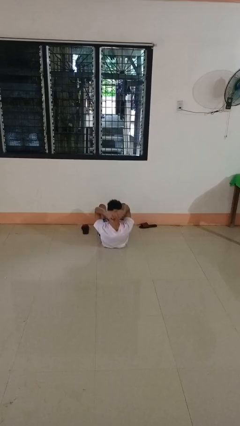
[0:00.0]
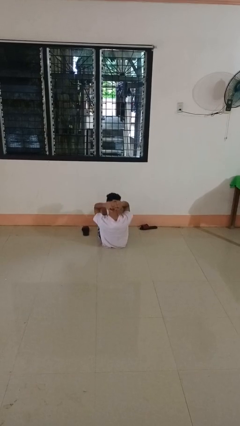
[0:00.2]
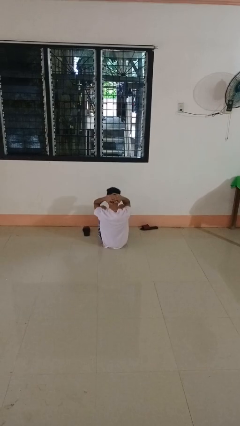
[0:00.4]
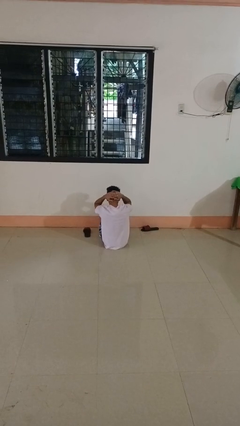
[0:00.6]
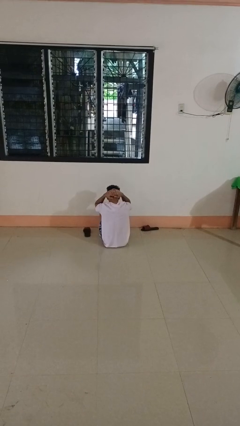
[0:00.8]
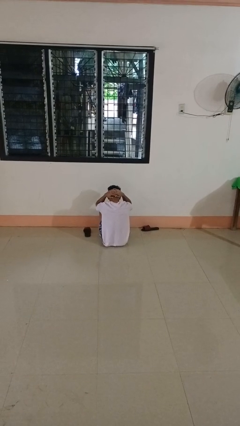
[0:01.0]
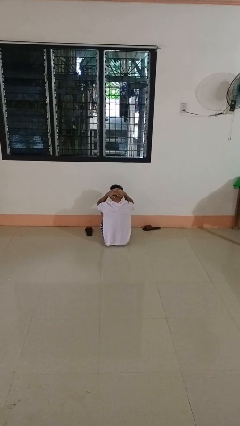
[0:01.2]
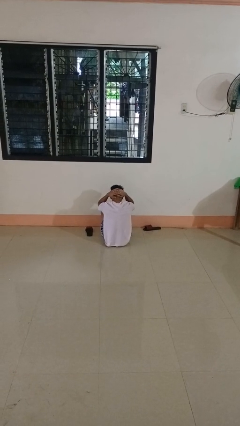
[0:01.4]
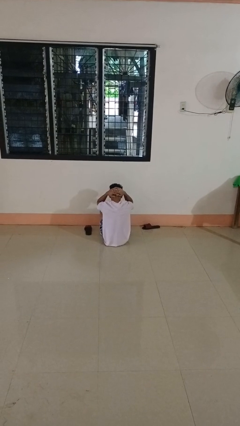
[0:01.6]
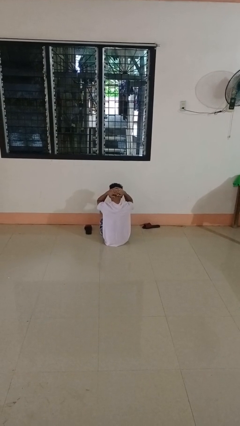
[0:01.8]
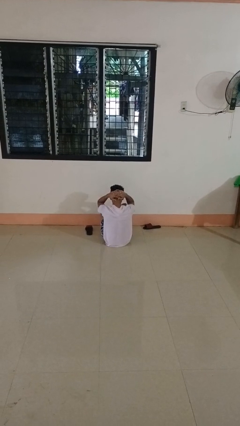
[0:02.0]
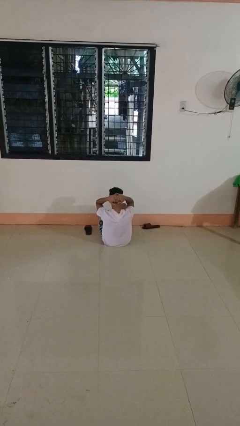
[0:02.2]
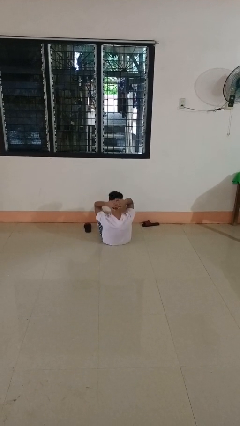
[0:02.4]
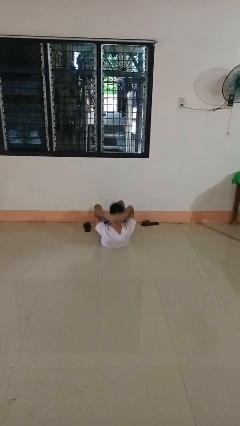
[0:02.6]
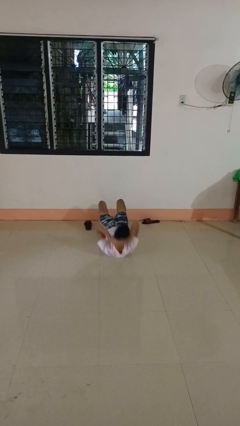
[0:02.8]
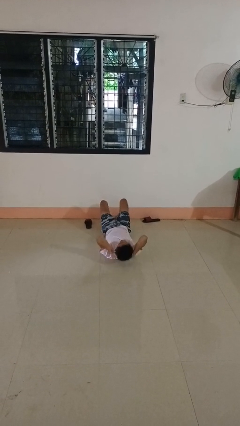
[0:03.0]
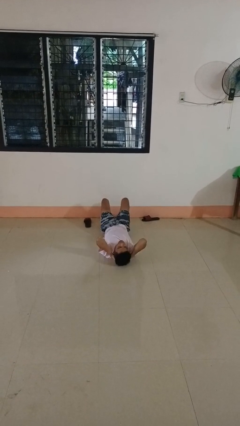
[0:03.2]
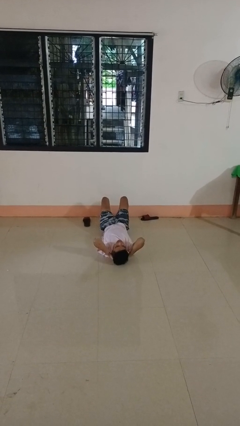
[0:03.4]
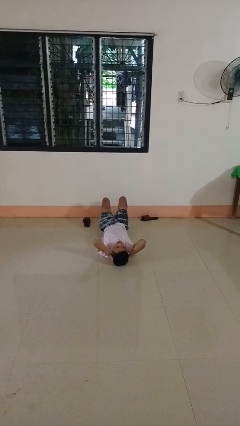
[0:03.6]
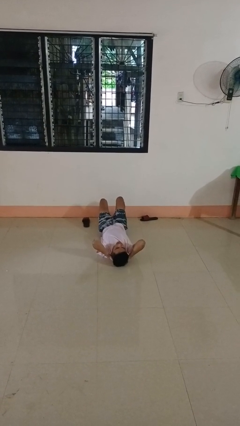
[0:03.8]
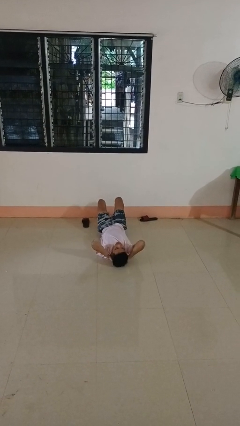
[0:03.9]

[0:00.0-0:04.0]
person exercises with situp

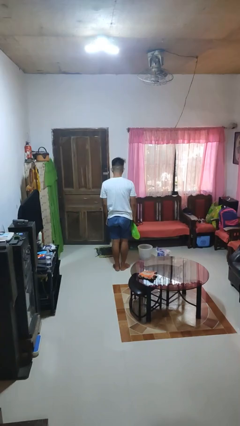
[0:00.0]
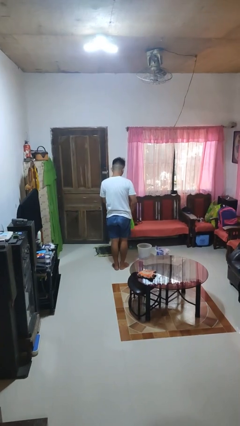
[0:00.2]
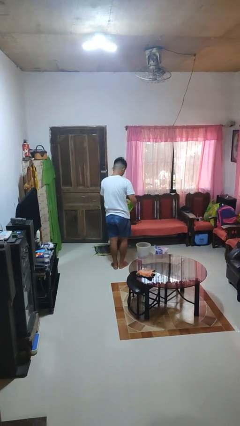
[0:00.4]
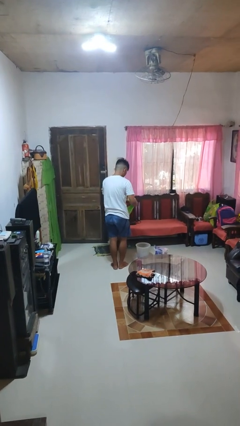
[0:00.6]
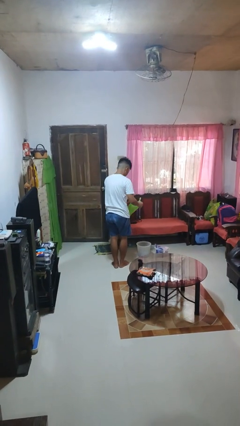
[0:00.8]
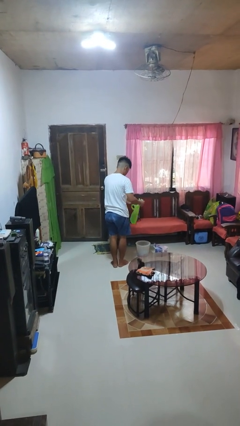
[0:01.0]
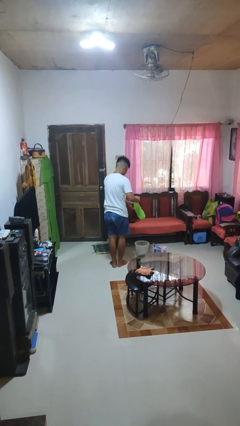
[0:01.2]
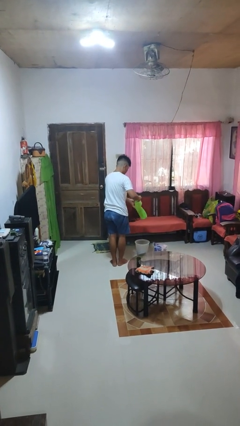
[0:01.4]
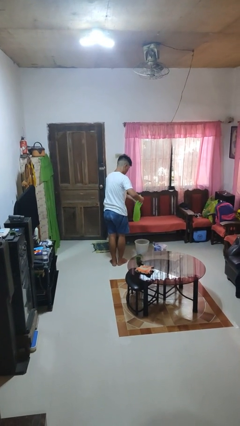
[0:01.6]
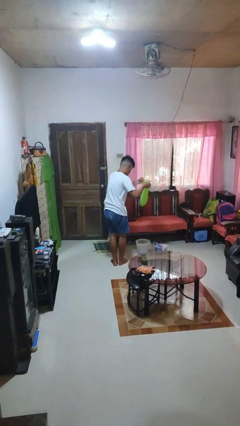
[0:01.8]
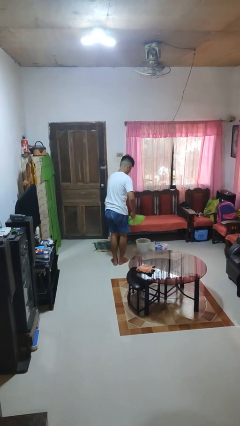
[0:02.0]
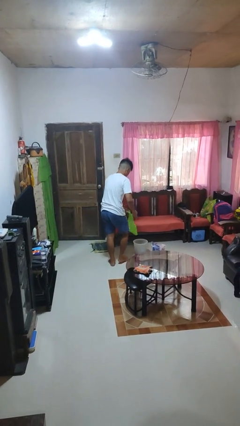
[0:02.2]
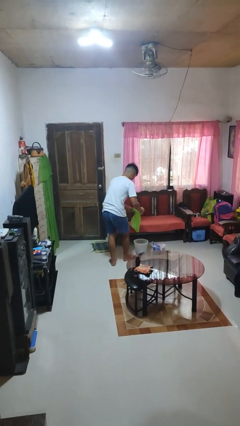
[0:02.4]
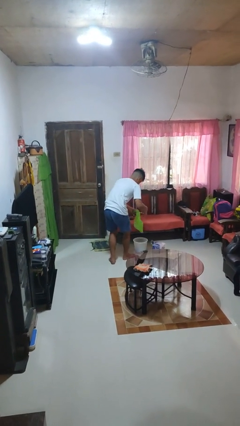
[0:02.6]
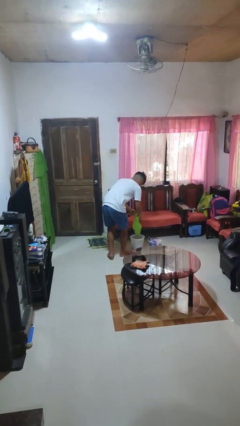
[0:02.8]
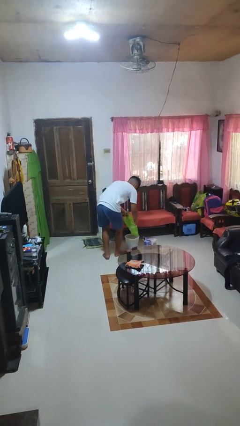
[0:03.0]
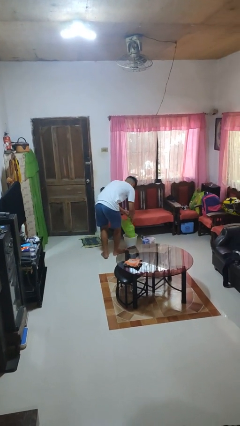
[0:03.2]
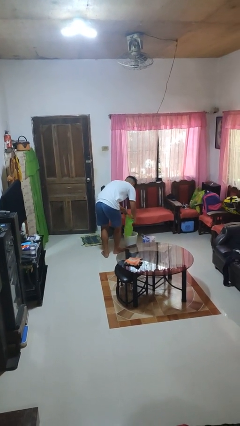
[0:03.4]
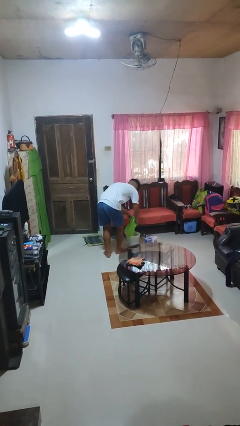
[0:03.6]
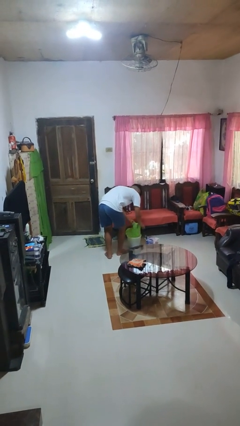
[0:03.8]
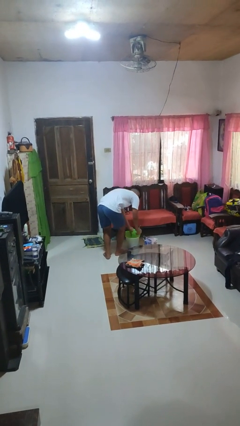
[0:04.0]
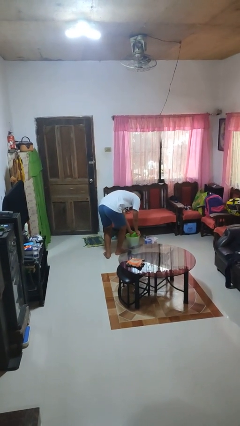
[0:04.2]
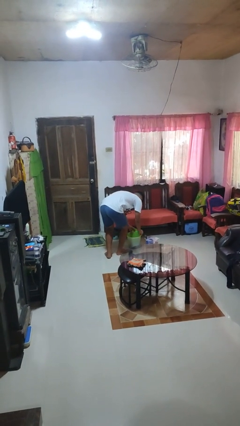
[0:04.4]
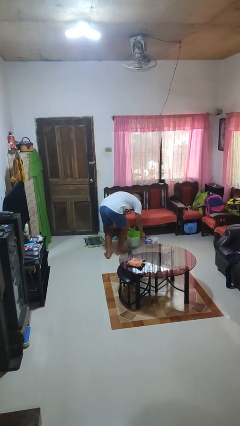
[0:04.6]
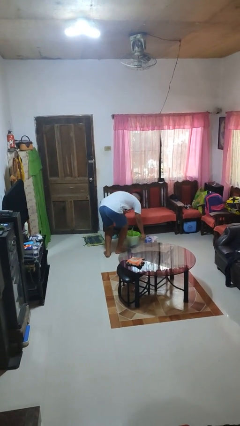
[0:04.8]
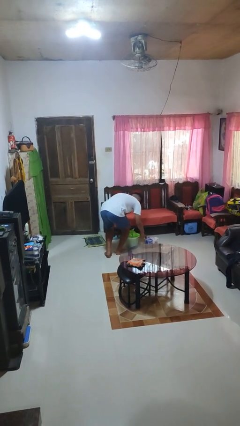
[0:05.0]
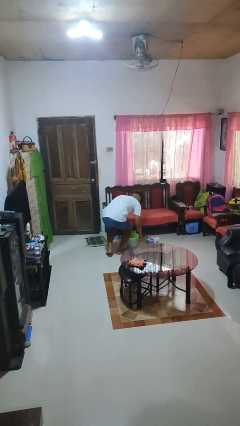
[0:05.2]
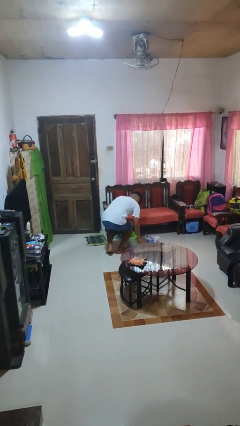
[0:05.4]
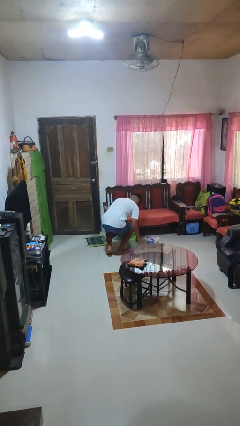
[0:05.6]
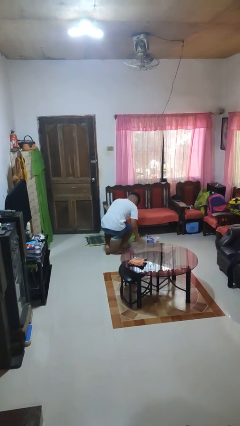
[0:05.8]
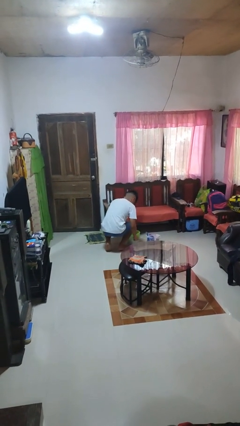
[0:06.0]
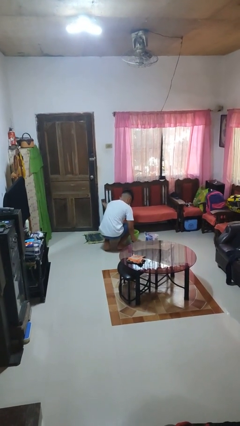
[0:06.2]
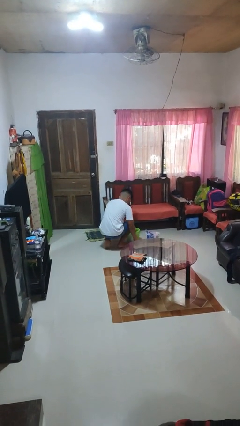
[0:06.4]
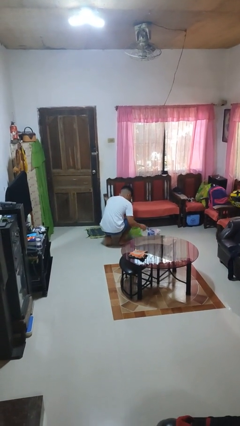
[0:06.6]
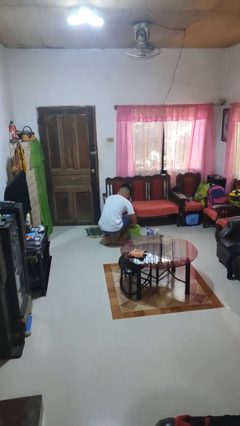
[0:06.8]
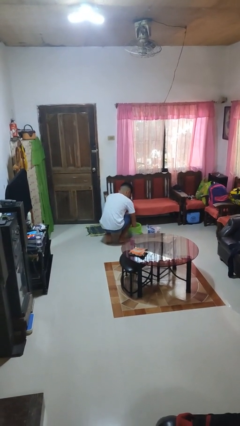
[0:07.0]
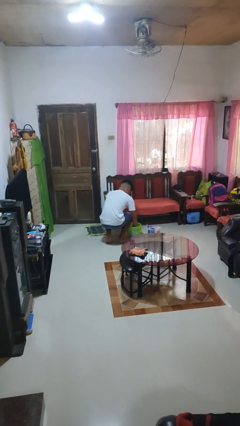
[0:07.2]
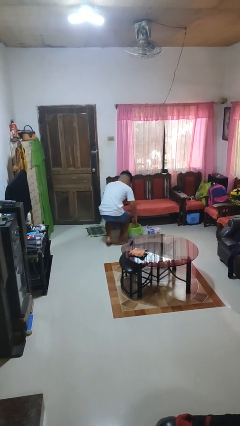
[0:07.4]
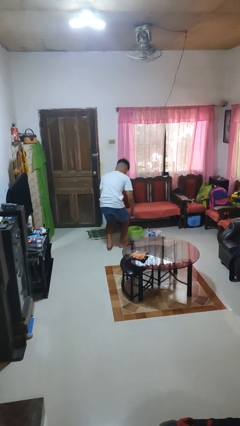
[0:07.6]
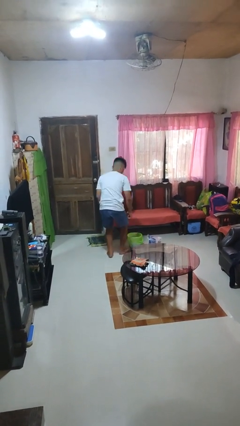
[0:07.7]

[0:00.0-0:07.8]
person inserts trashbag into trashcan

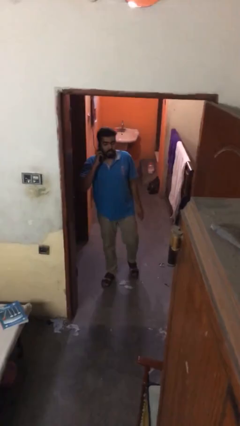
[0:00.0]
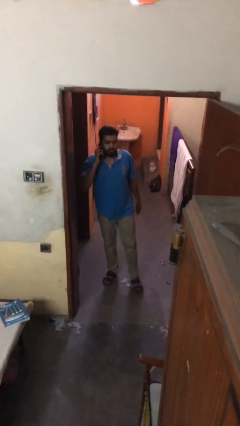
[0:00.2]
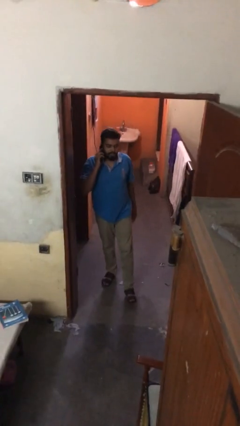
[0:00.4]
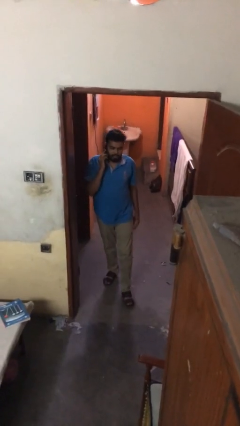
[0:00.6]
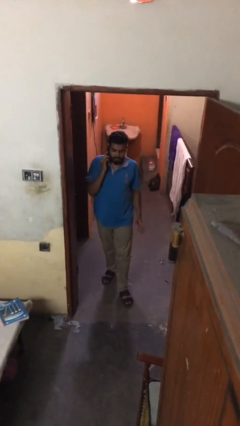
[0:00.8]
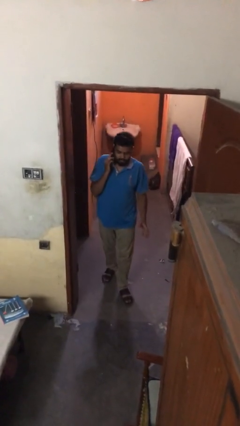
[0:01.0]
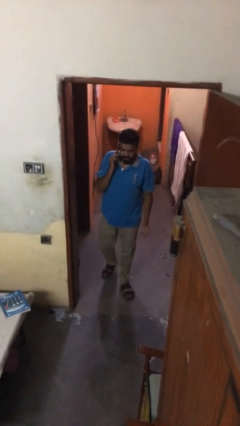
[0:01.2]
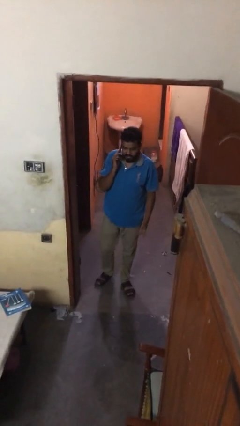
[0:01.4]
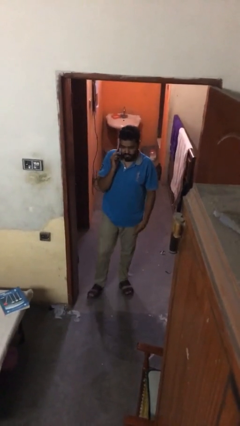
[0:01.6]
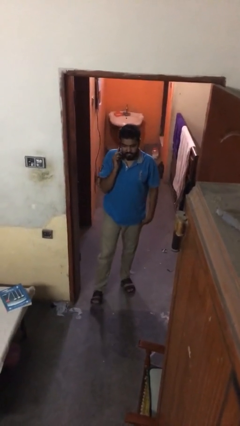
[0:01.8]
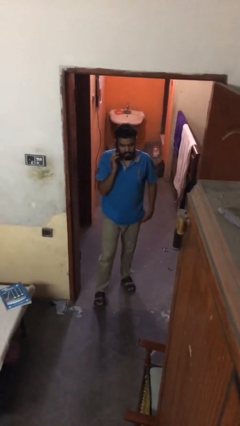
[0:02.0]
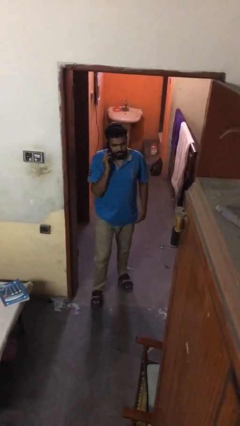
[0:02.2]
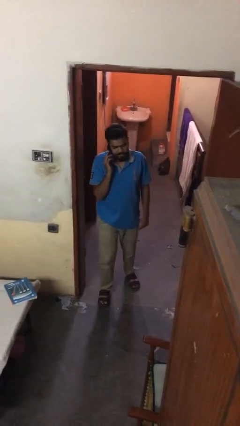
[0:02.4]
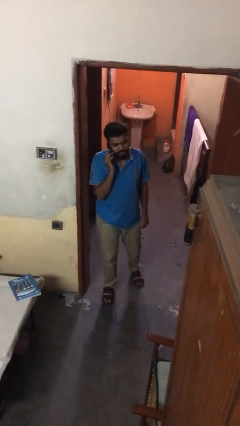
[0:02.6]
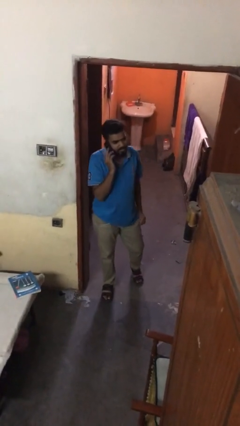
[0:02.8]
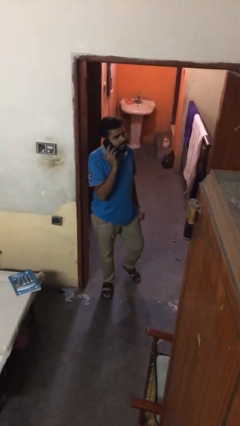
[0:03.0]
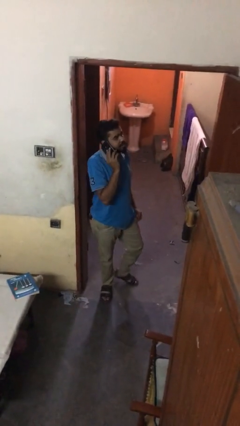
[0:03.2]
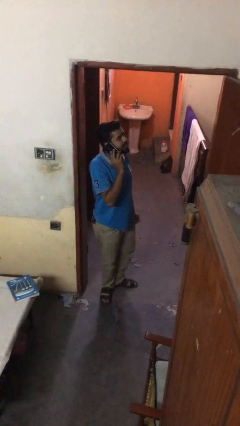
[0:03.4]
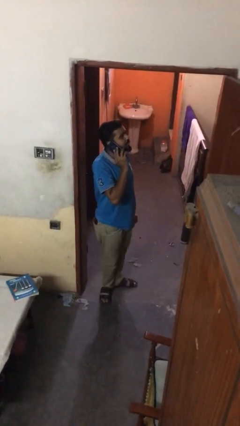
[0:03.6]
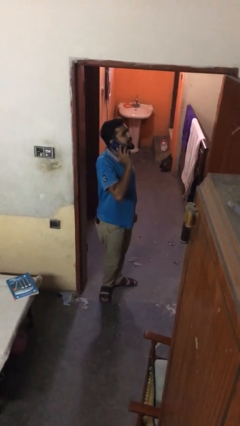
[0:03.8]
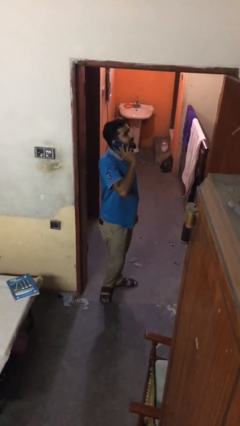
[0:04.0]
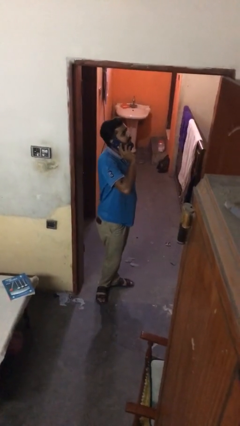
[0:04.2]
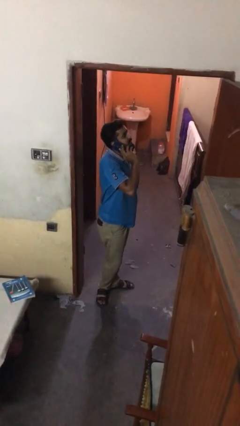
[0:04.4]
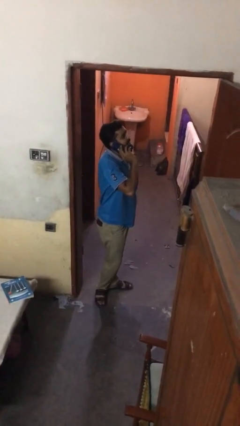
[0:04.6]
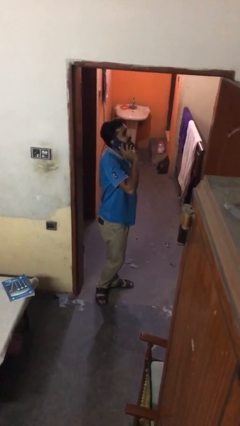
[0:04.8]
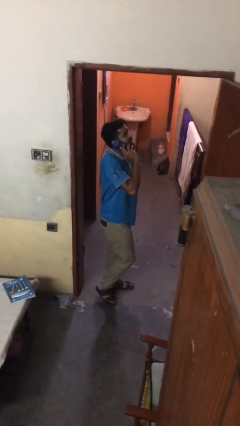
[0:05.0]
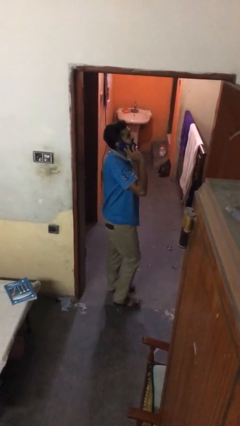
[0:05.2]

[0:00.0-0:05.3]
person talks on phone

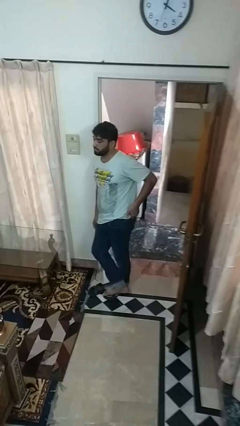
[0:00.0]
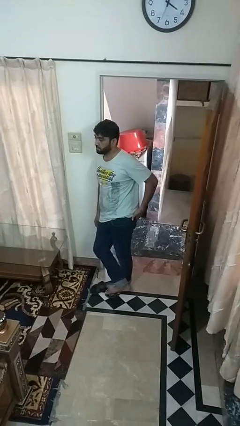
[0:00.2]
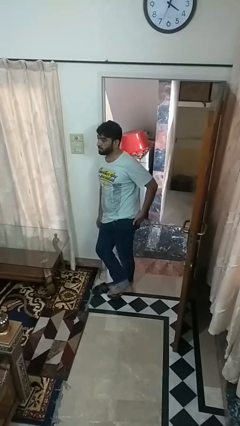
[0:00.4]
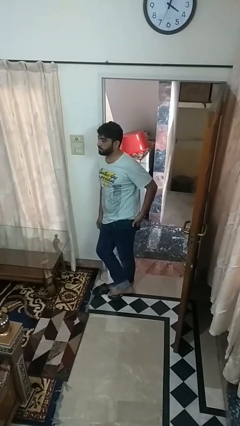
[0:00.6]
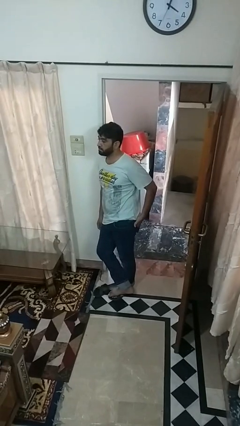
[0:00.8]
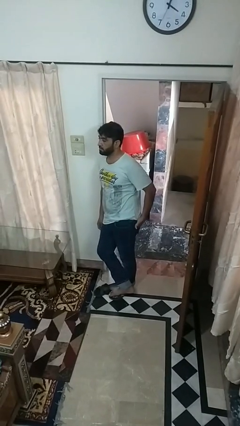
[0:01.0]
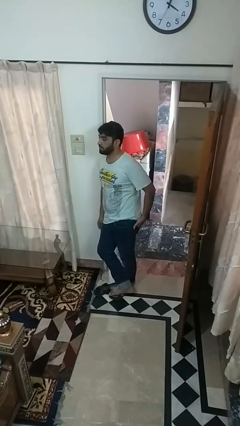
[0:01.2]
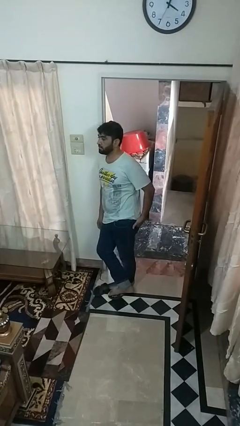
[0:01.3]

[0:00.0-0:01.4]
person puts hands in back pockets
